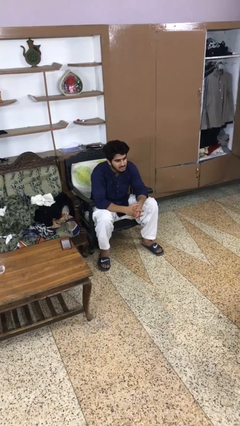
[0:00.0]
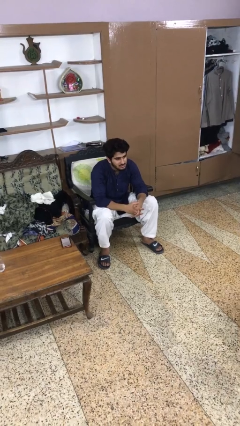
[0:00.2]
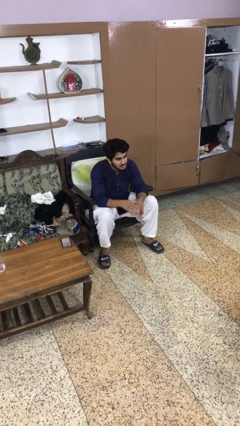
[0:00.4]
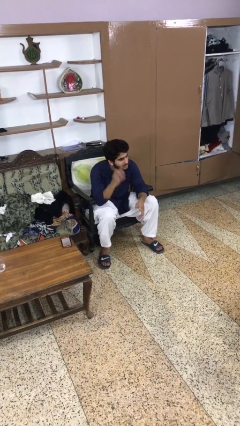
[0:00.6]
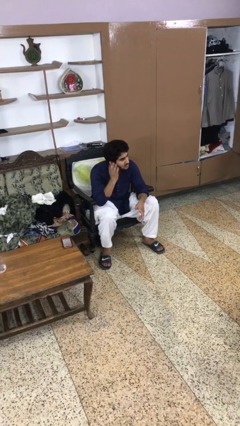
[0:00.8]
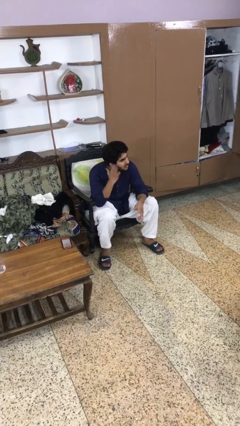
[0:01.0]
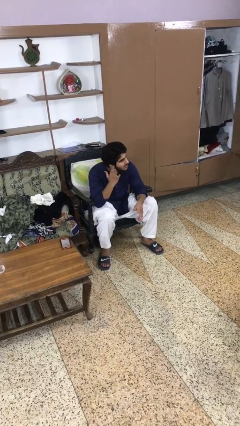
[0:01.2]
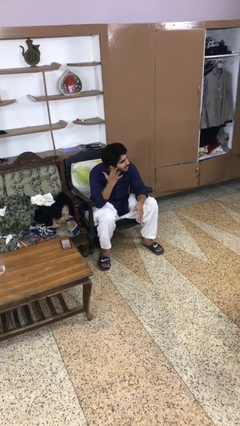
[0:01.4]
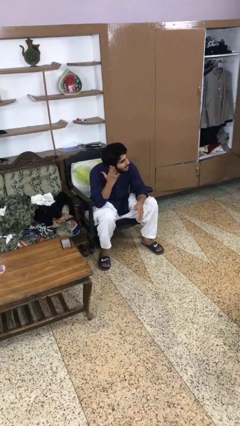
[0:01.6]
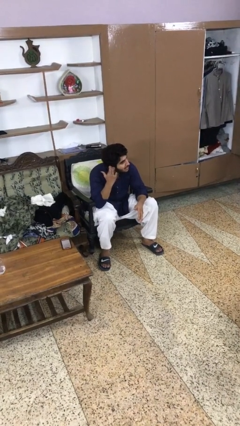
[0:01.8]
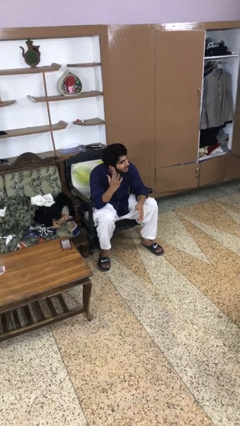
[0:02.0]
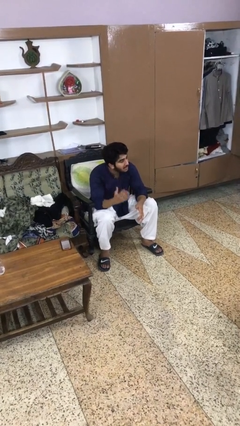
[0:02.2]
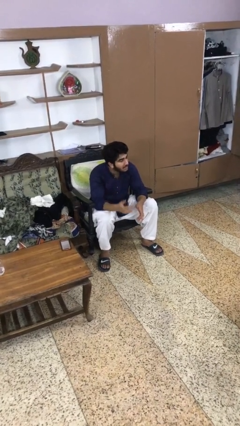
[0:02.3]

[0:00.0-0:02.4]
person puts fingers in ear

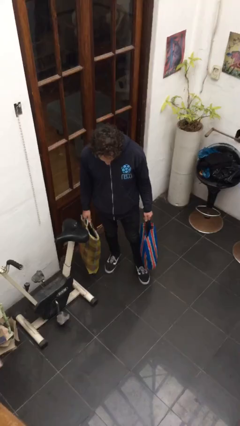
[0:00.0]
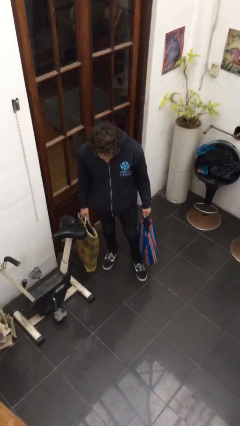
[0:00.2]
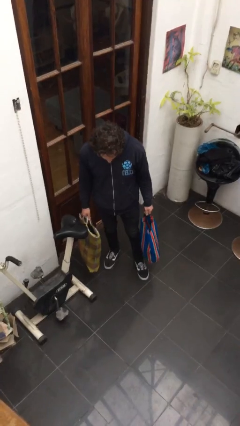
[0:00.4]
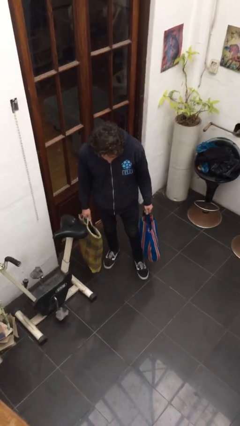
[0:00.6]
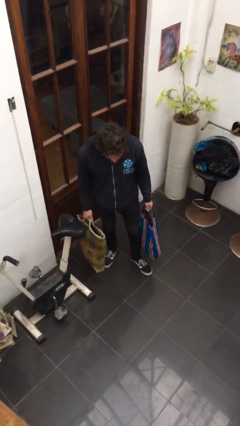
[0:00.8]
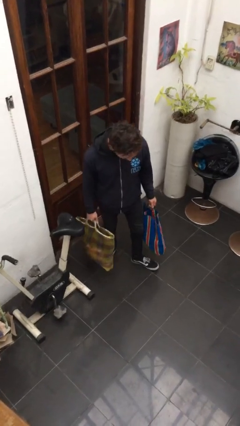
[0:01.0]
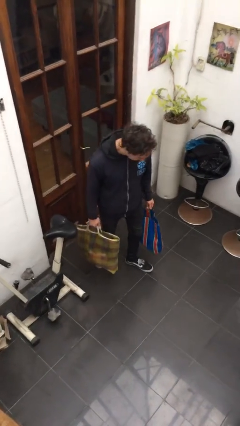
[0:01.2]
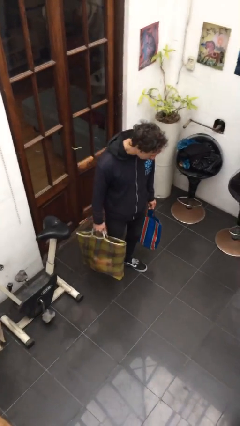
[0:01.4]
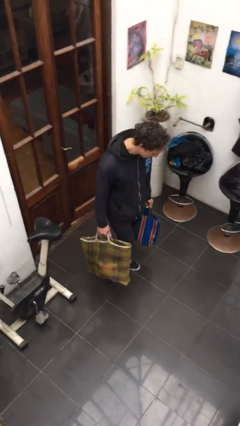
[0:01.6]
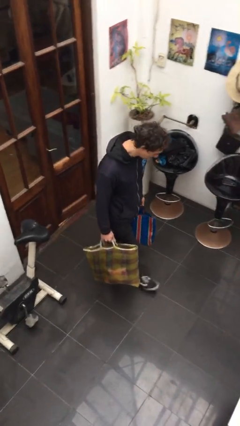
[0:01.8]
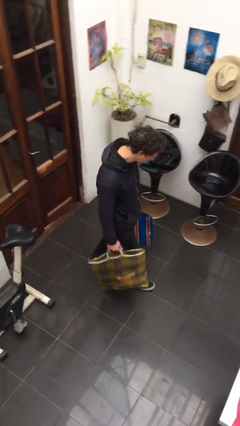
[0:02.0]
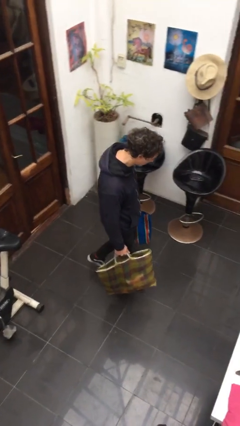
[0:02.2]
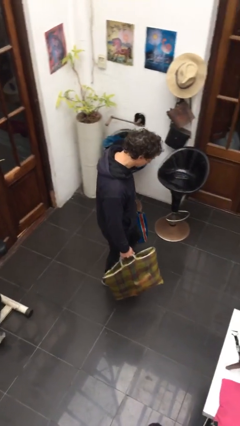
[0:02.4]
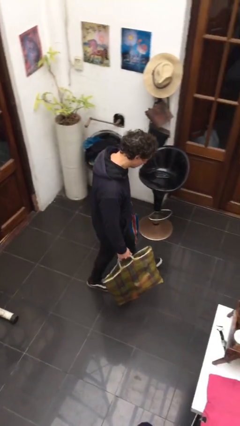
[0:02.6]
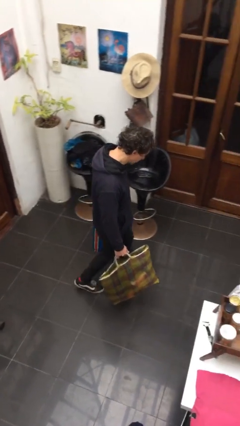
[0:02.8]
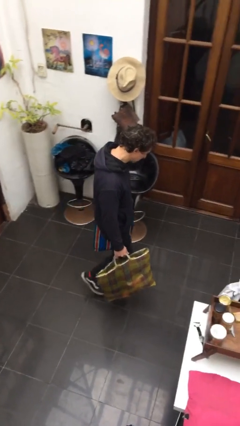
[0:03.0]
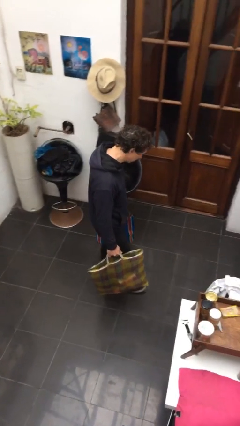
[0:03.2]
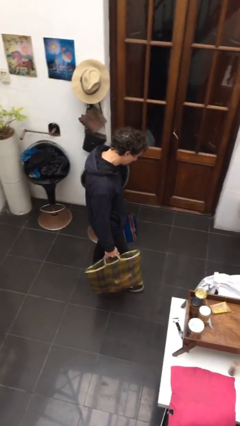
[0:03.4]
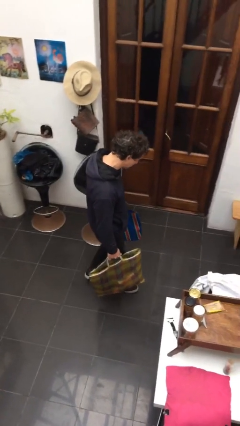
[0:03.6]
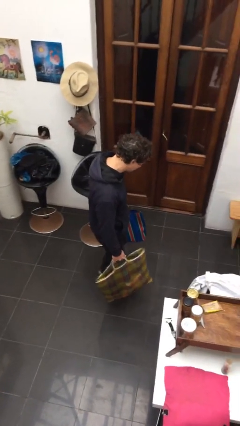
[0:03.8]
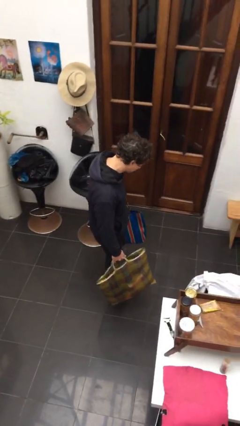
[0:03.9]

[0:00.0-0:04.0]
person carries groceries

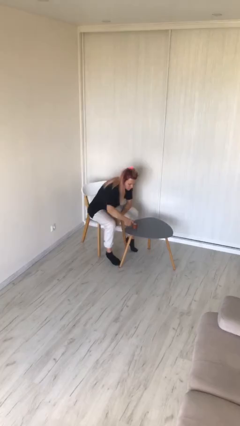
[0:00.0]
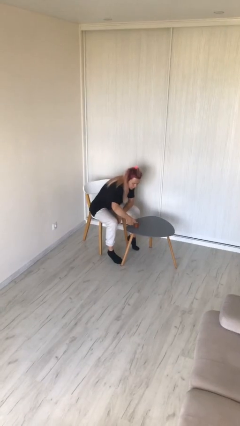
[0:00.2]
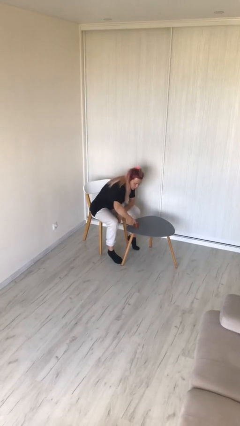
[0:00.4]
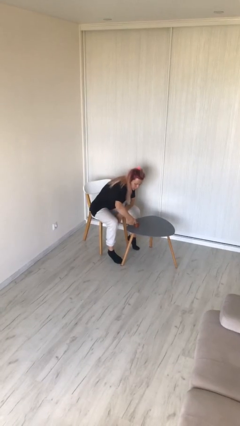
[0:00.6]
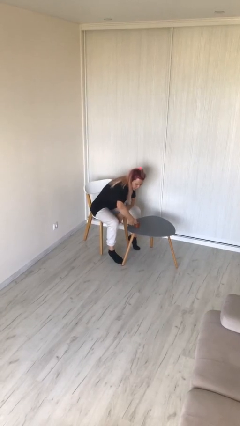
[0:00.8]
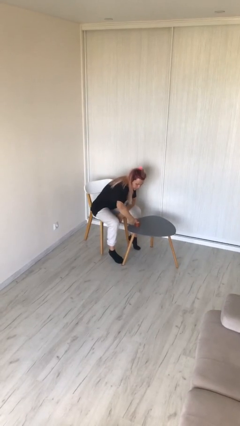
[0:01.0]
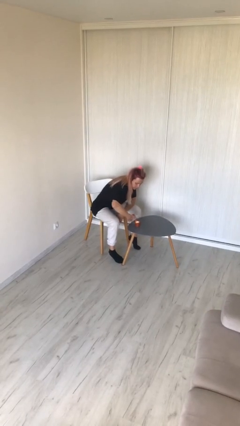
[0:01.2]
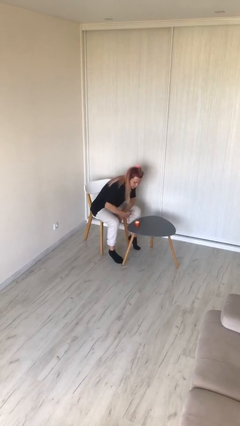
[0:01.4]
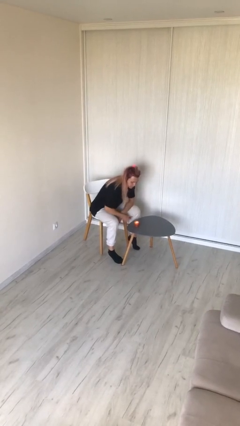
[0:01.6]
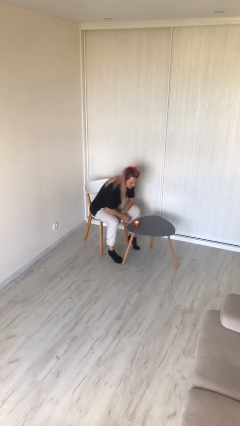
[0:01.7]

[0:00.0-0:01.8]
person lights candle

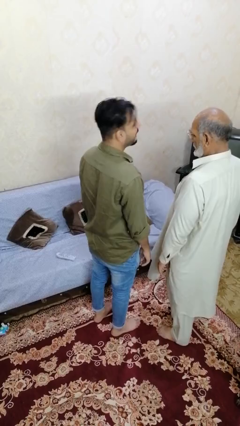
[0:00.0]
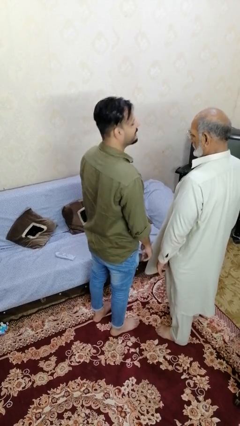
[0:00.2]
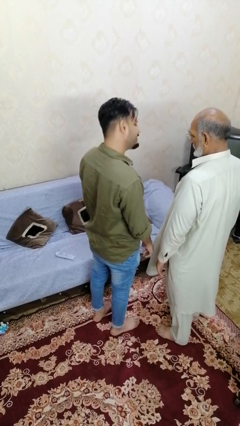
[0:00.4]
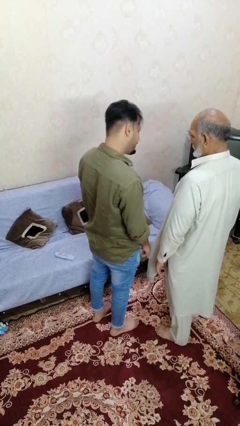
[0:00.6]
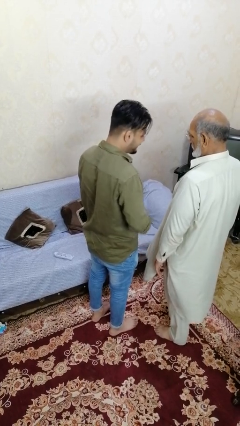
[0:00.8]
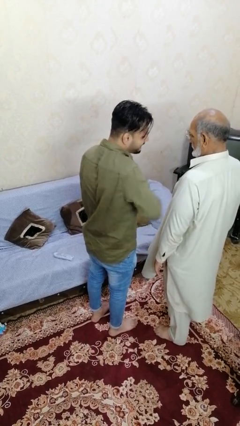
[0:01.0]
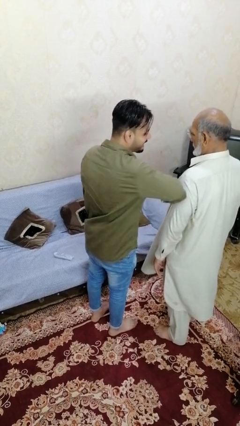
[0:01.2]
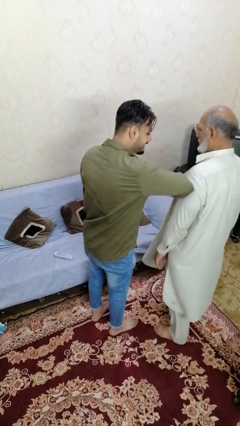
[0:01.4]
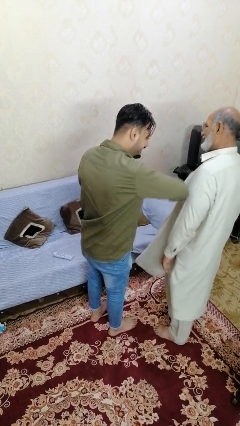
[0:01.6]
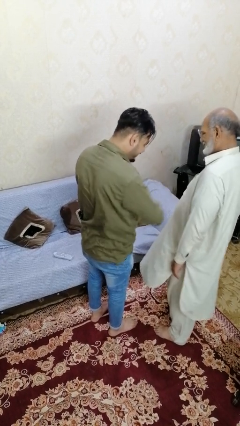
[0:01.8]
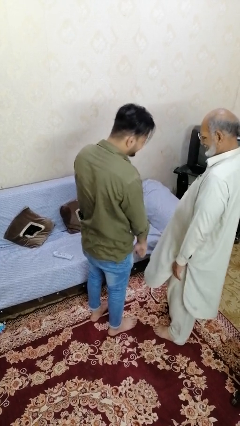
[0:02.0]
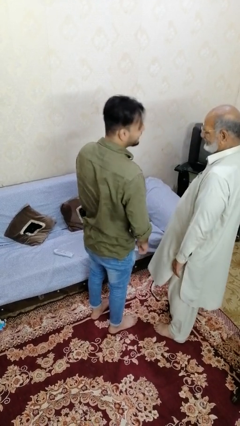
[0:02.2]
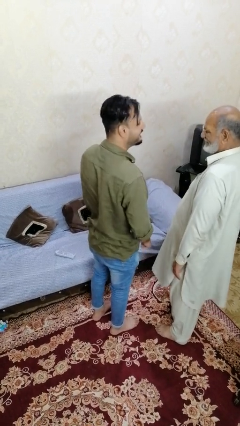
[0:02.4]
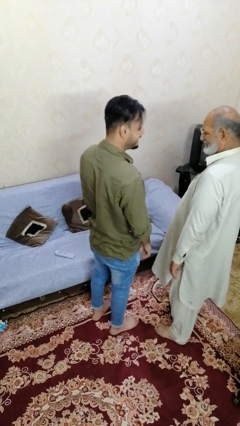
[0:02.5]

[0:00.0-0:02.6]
person nudges person with elbow

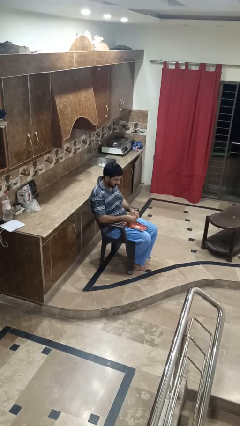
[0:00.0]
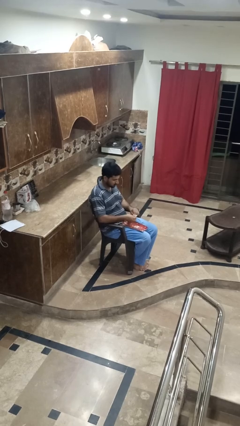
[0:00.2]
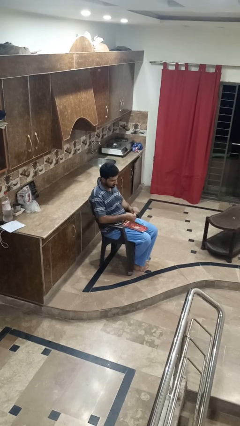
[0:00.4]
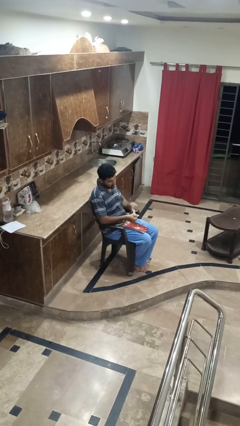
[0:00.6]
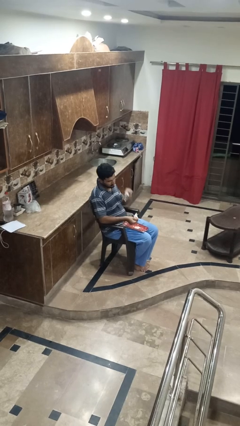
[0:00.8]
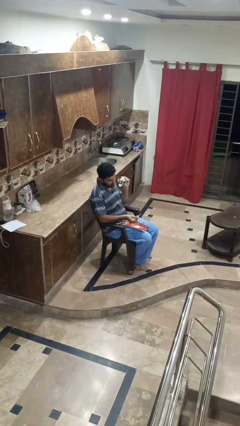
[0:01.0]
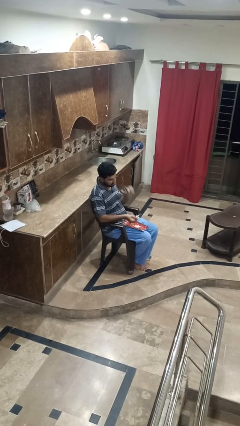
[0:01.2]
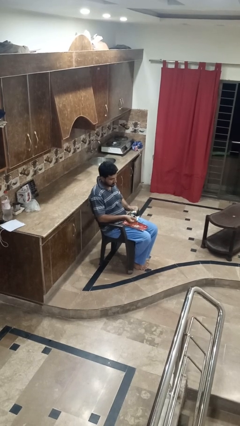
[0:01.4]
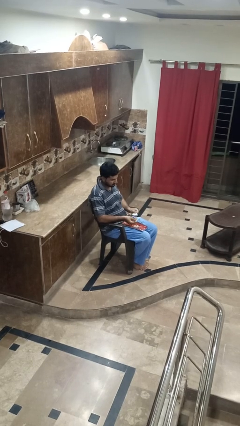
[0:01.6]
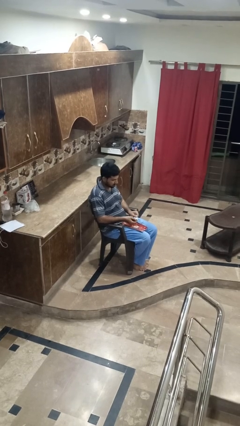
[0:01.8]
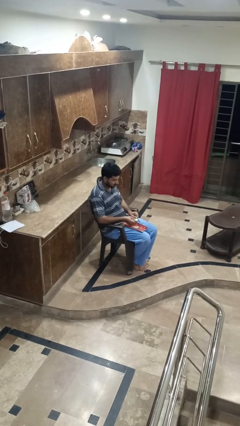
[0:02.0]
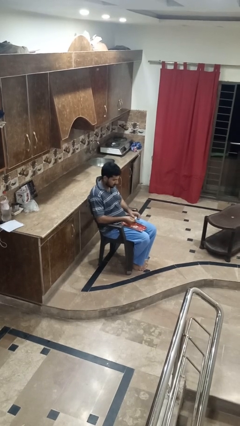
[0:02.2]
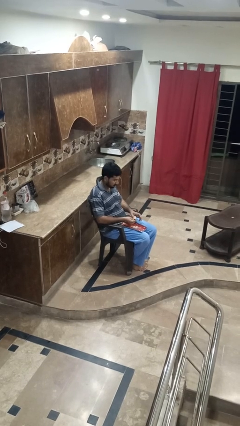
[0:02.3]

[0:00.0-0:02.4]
person tears paper

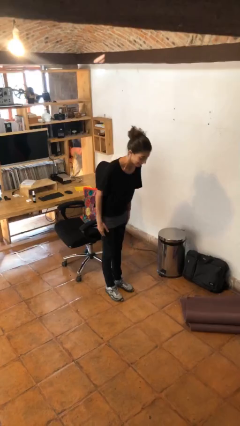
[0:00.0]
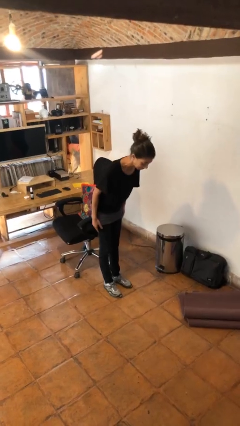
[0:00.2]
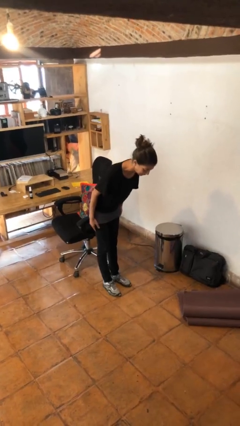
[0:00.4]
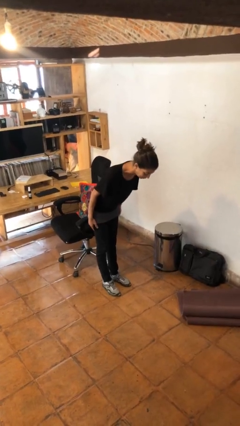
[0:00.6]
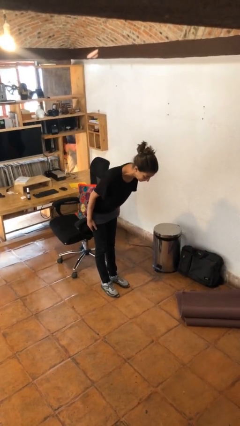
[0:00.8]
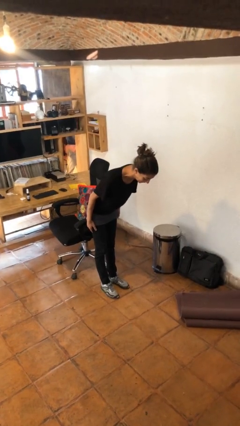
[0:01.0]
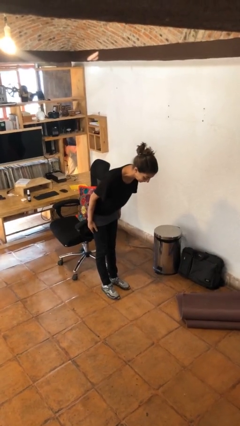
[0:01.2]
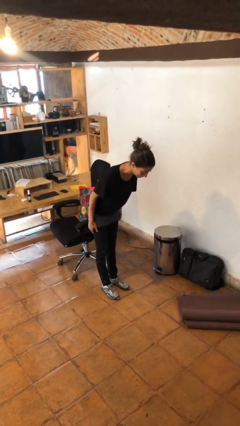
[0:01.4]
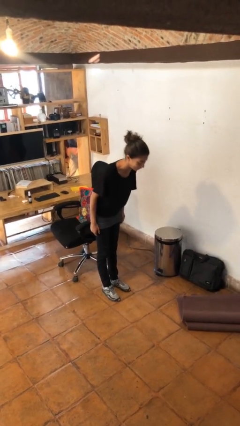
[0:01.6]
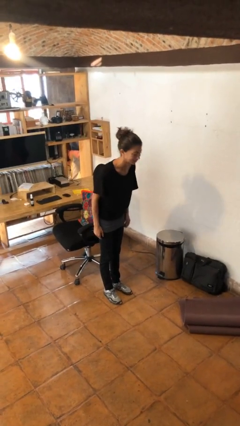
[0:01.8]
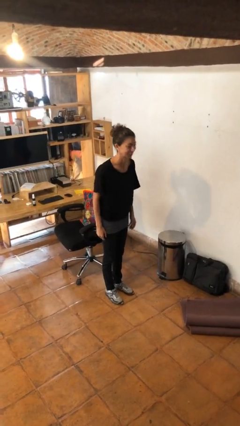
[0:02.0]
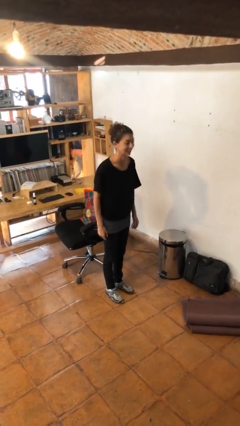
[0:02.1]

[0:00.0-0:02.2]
person bows

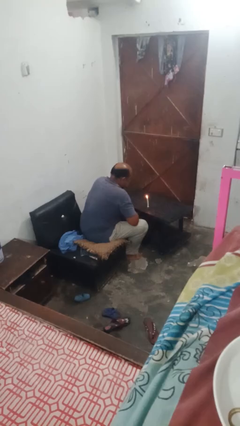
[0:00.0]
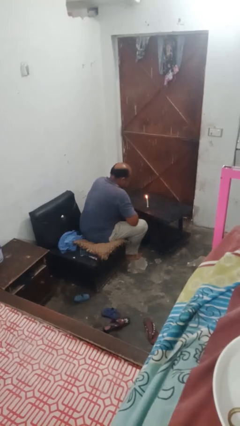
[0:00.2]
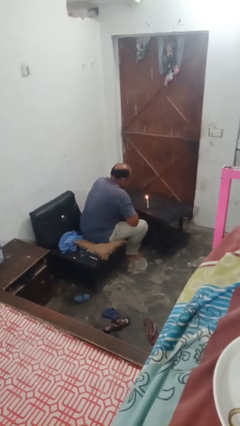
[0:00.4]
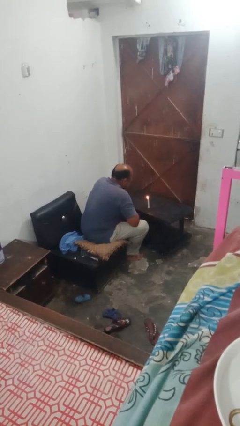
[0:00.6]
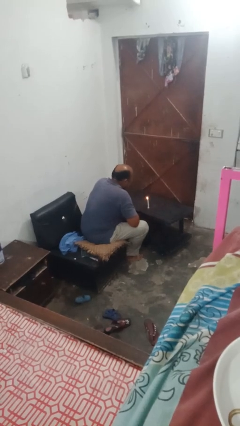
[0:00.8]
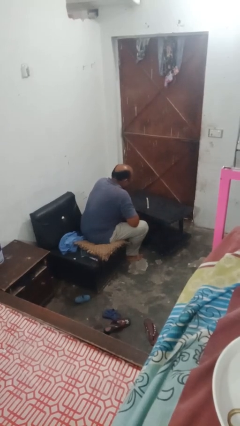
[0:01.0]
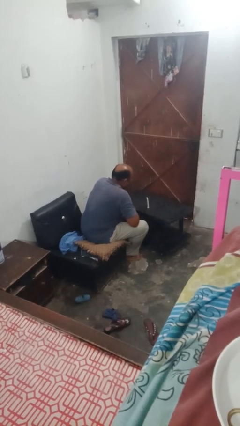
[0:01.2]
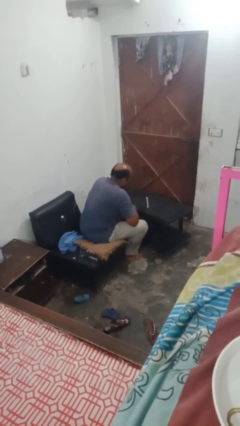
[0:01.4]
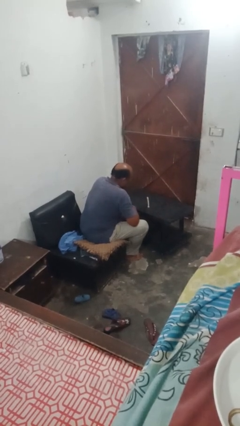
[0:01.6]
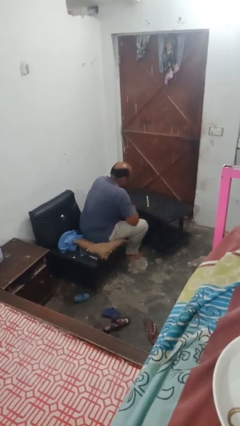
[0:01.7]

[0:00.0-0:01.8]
person extinguishes candle
